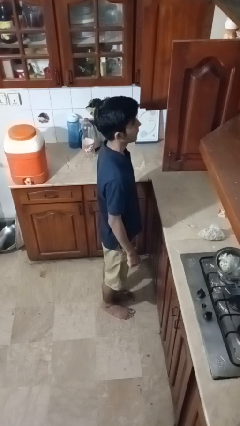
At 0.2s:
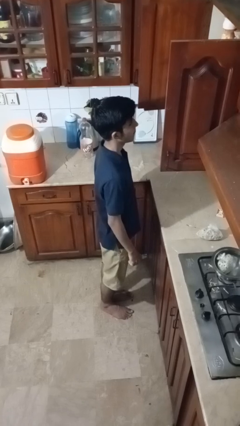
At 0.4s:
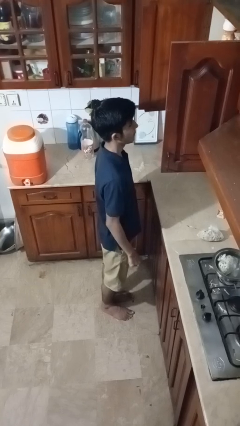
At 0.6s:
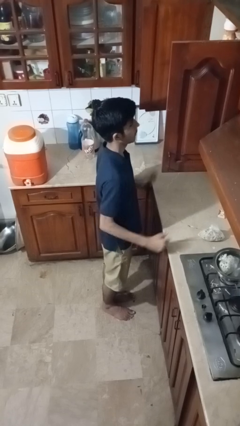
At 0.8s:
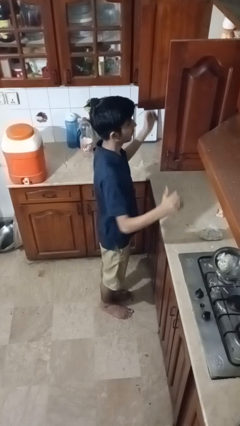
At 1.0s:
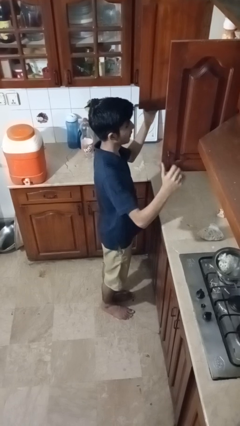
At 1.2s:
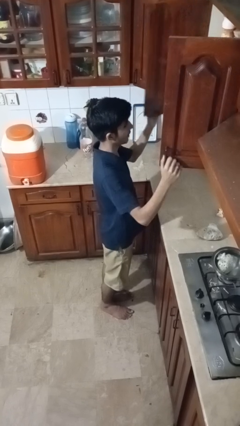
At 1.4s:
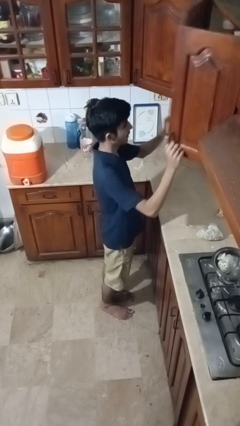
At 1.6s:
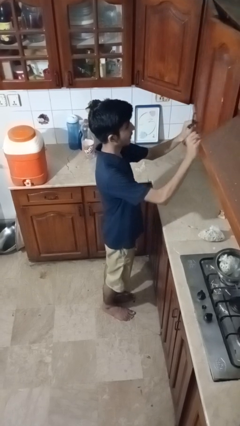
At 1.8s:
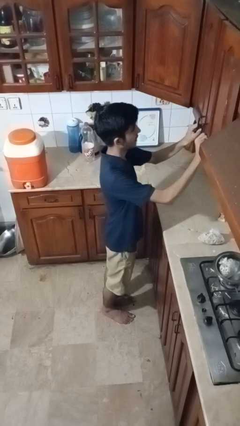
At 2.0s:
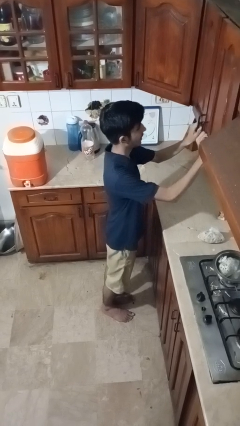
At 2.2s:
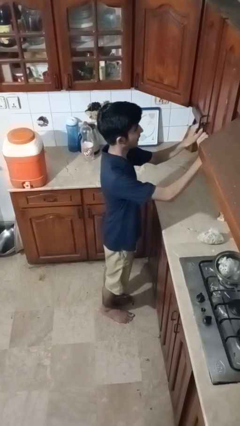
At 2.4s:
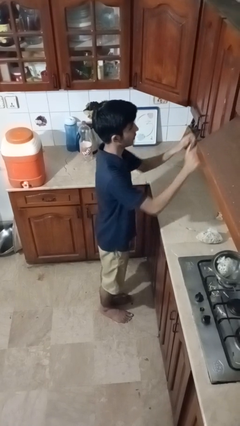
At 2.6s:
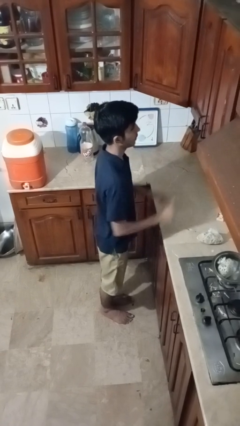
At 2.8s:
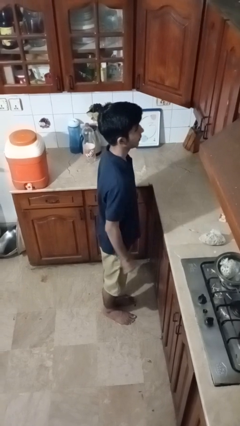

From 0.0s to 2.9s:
person closes cabinet

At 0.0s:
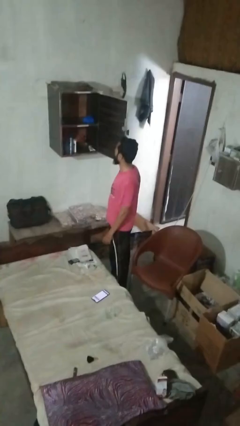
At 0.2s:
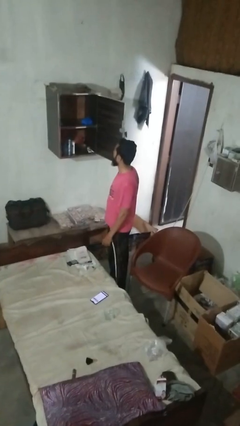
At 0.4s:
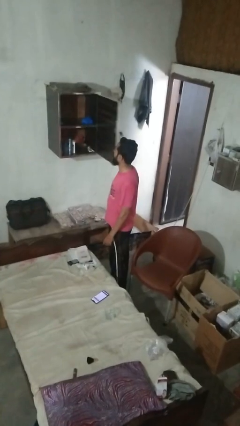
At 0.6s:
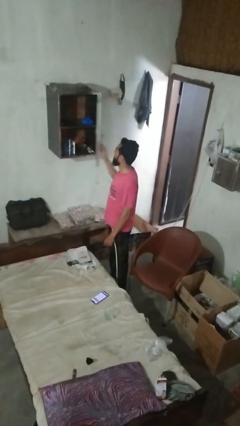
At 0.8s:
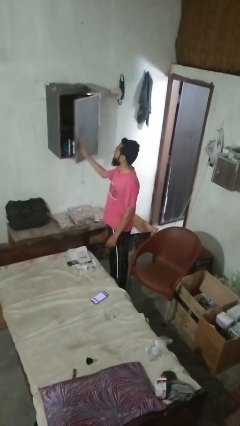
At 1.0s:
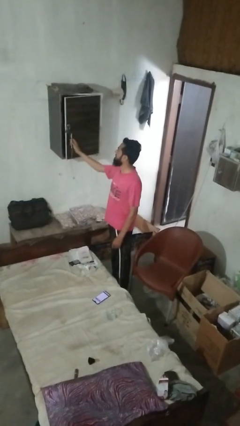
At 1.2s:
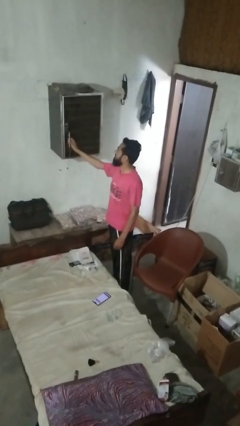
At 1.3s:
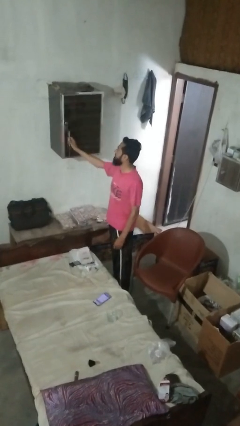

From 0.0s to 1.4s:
person closes dresser drawer

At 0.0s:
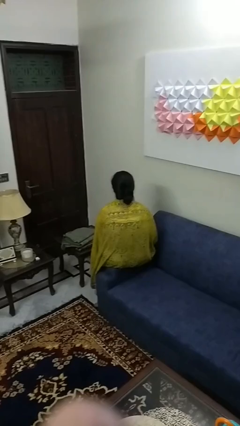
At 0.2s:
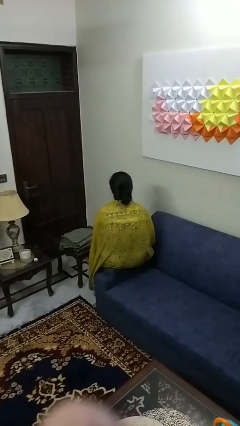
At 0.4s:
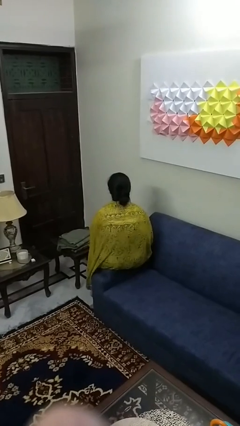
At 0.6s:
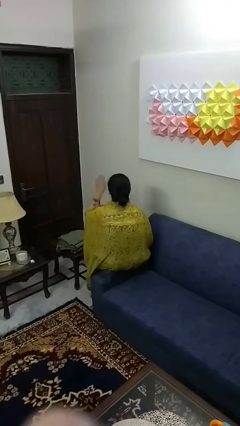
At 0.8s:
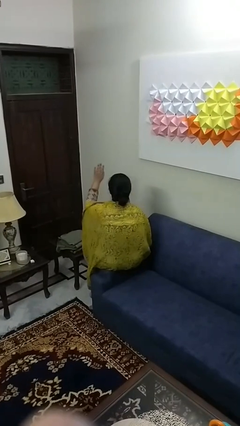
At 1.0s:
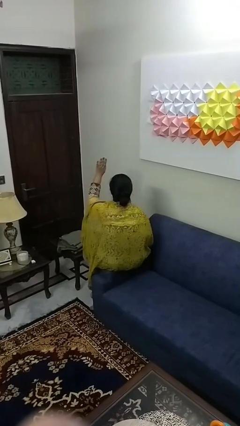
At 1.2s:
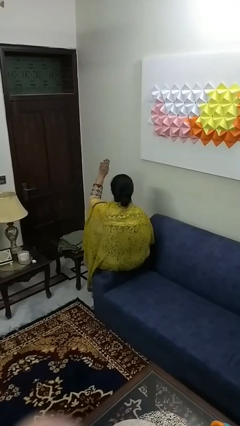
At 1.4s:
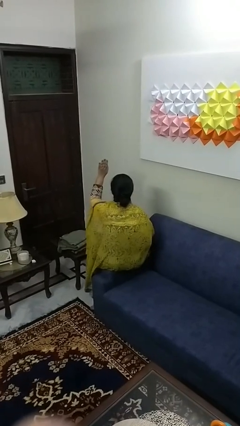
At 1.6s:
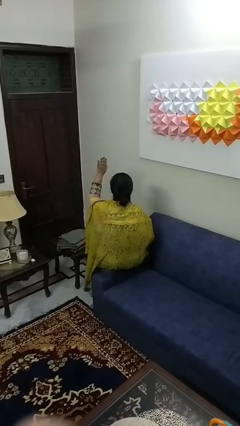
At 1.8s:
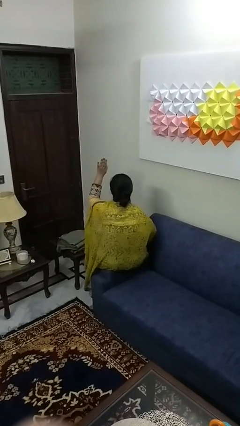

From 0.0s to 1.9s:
person gestures raise hand

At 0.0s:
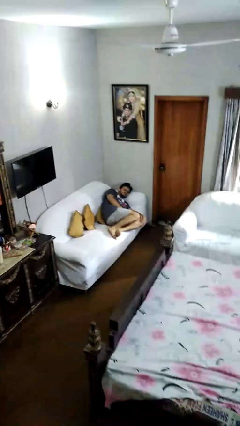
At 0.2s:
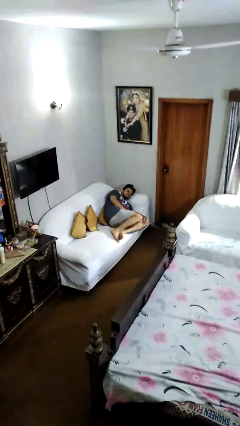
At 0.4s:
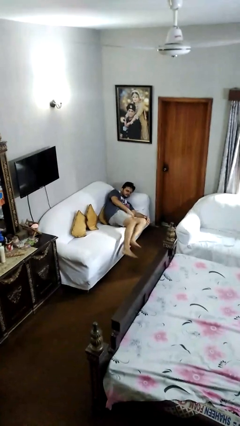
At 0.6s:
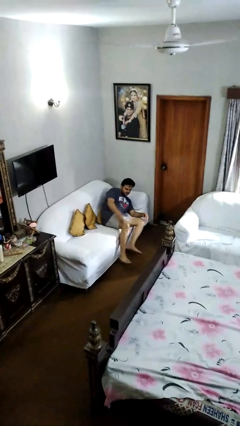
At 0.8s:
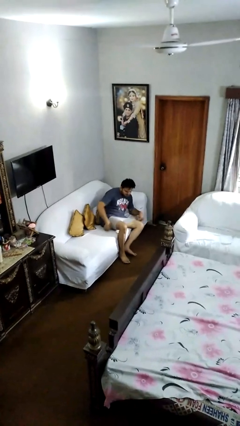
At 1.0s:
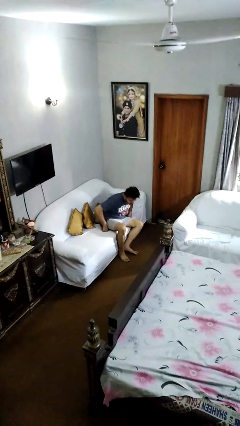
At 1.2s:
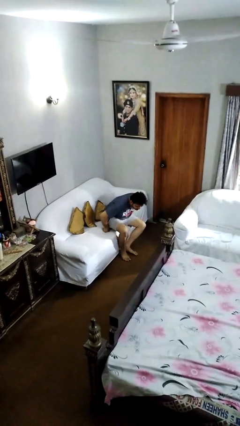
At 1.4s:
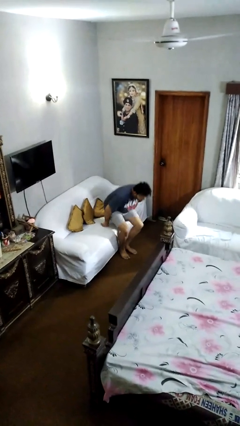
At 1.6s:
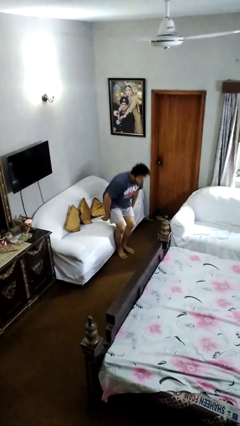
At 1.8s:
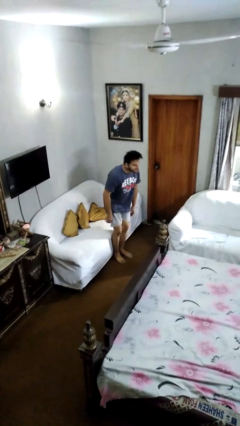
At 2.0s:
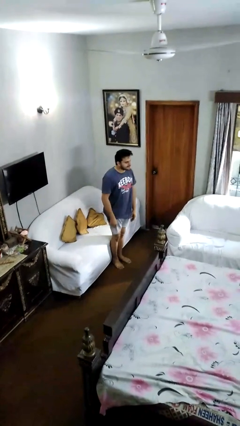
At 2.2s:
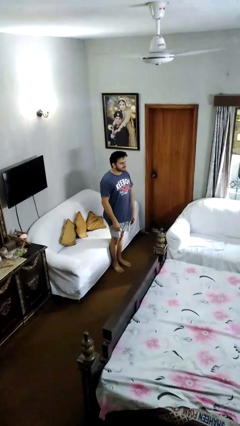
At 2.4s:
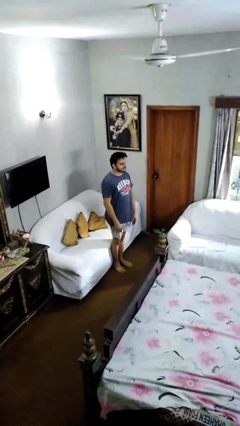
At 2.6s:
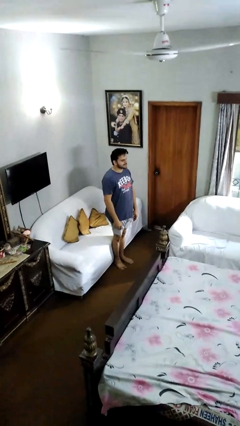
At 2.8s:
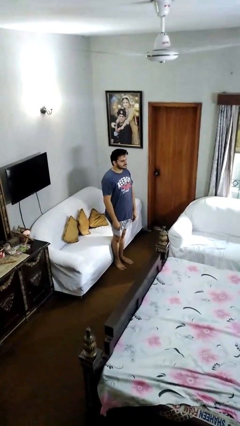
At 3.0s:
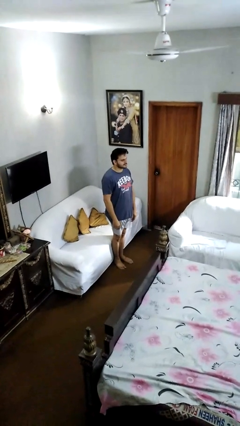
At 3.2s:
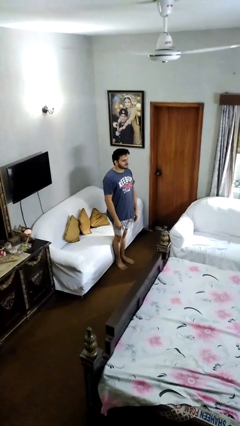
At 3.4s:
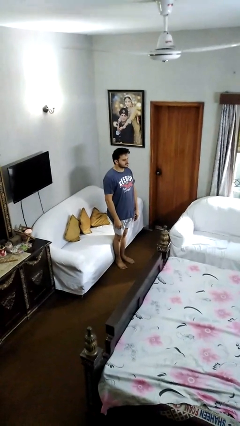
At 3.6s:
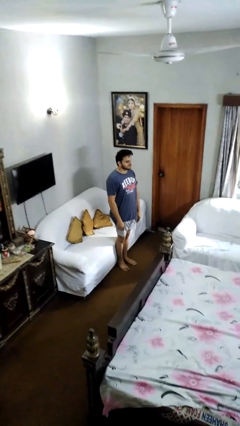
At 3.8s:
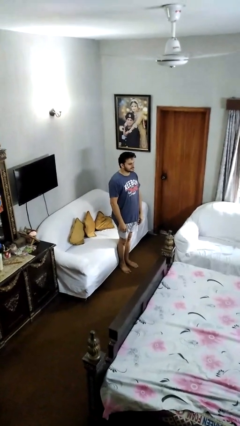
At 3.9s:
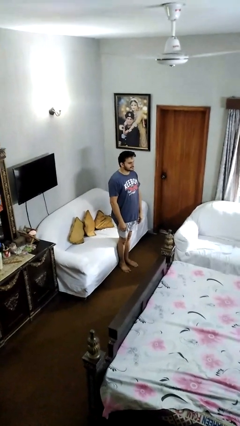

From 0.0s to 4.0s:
person stands up

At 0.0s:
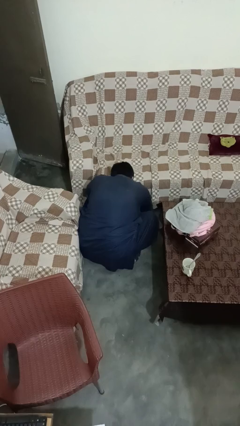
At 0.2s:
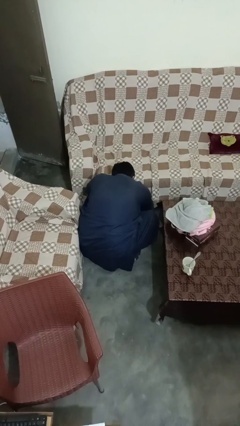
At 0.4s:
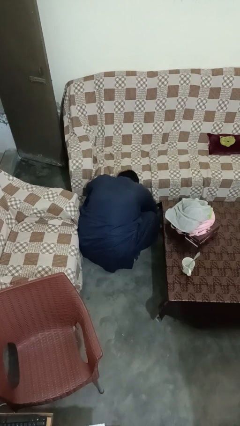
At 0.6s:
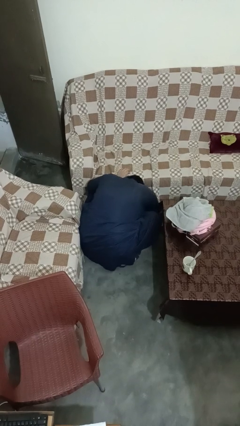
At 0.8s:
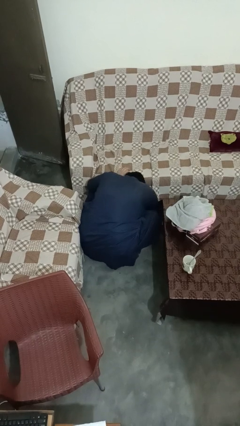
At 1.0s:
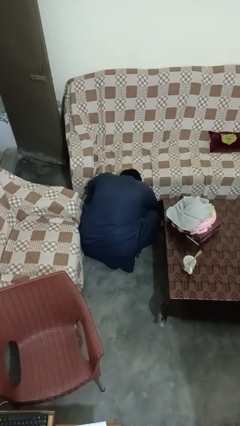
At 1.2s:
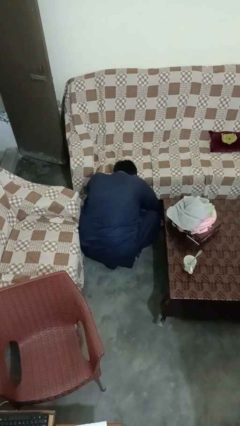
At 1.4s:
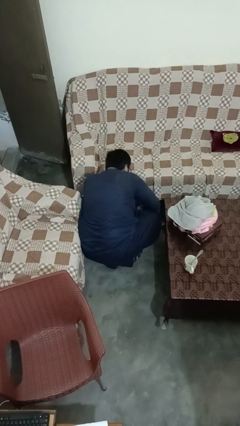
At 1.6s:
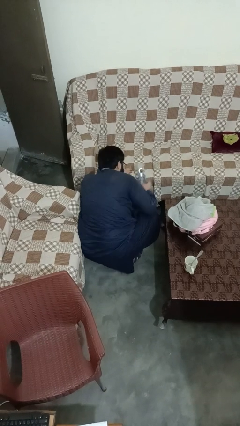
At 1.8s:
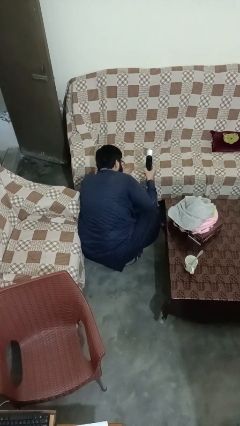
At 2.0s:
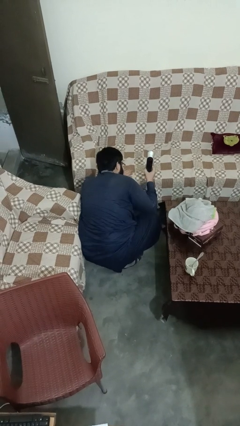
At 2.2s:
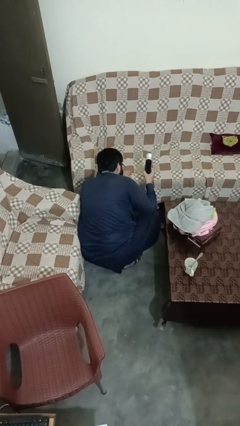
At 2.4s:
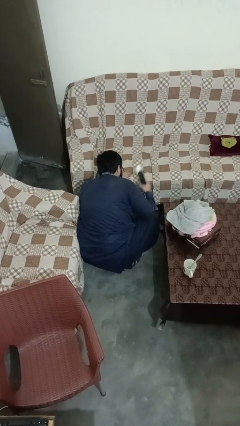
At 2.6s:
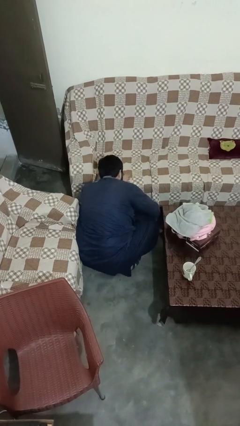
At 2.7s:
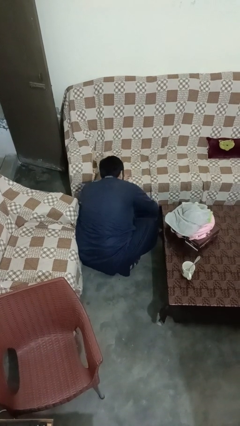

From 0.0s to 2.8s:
person searches under couch

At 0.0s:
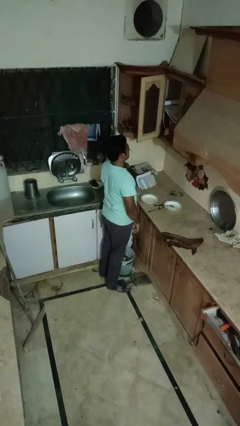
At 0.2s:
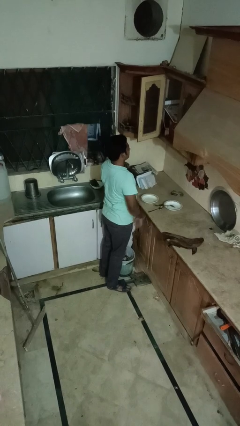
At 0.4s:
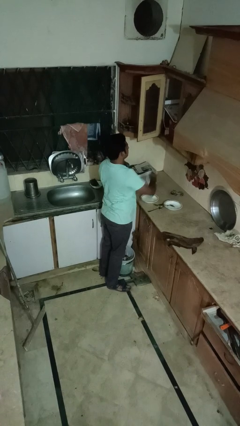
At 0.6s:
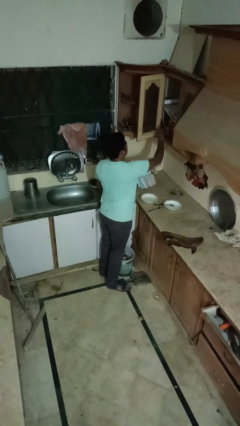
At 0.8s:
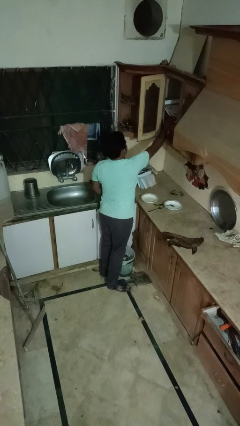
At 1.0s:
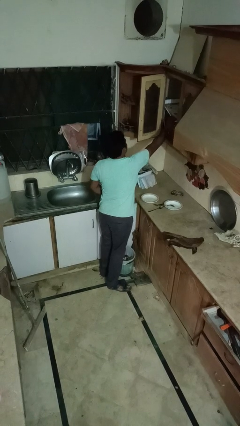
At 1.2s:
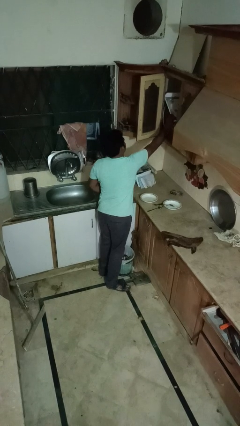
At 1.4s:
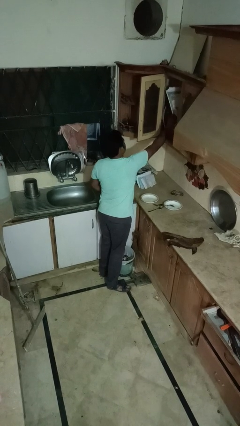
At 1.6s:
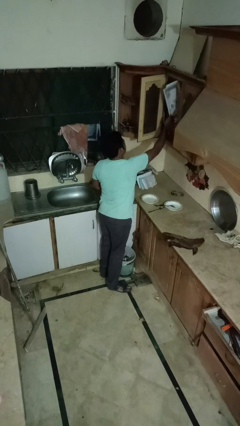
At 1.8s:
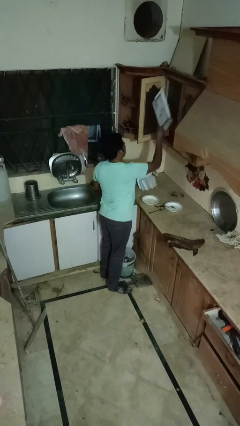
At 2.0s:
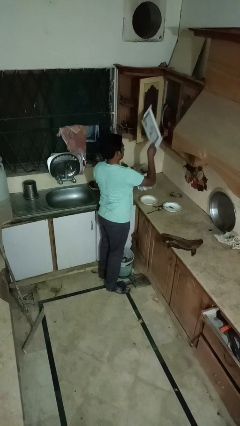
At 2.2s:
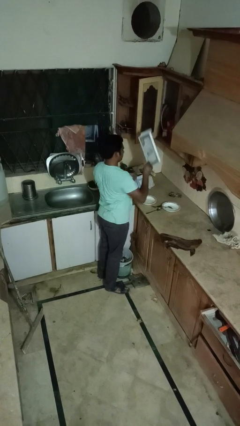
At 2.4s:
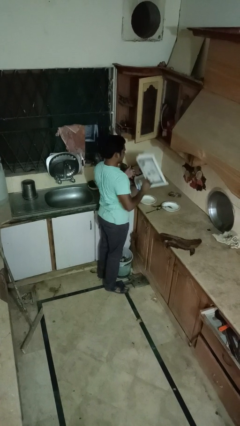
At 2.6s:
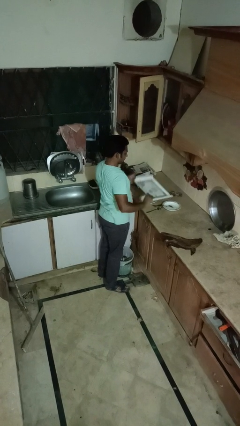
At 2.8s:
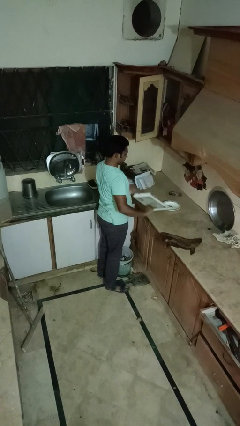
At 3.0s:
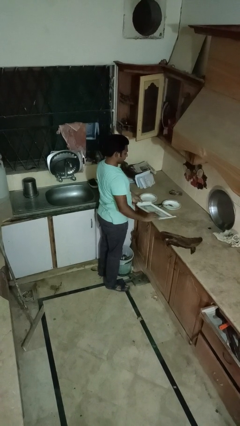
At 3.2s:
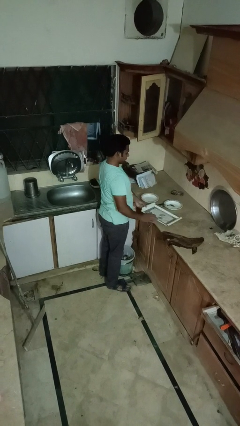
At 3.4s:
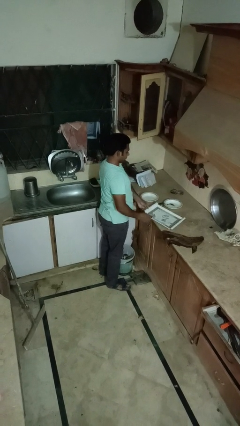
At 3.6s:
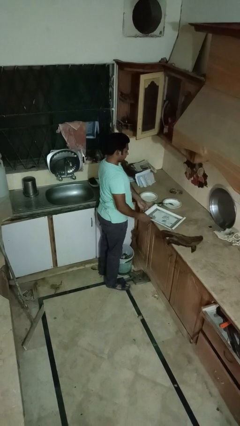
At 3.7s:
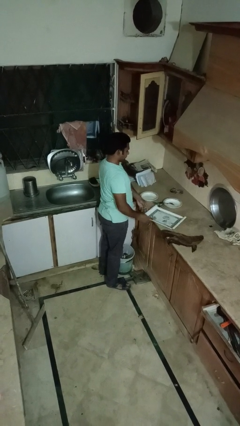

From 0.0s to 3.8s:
person takes object from cabinet

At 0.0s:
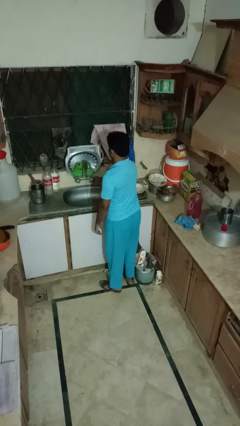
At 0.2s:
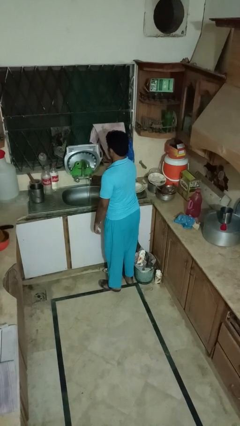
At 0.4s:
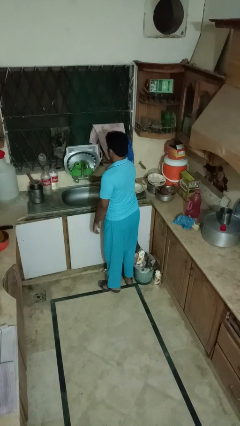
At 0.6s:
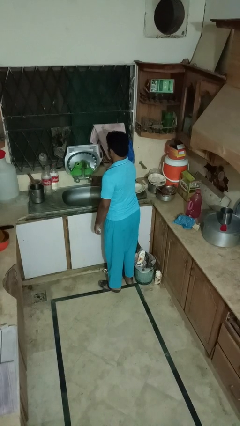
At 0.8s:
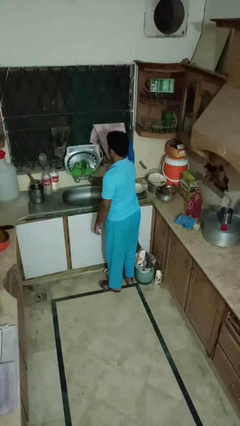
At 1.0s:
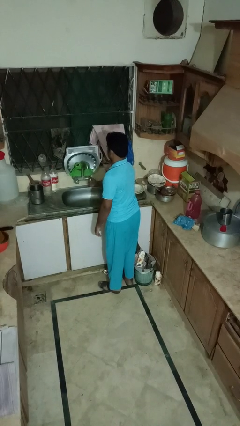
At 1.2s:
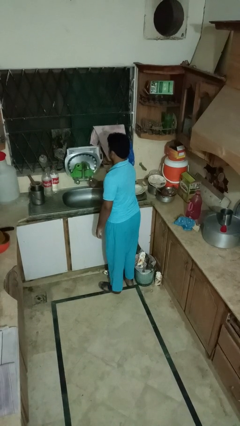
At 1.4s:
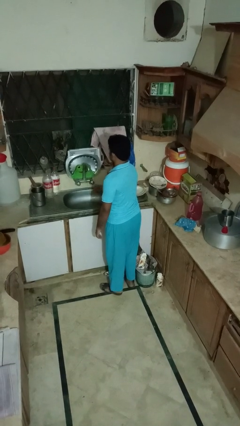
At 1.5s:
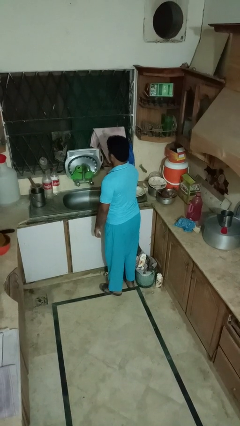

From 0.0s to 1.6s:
person turns off faucet
